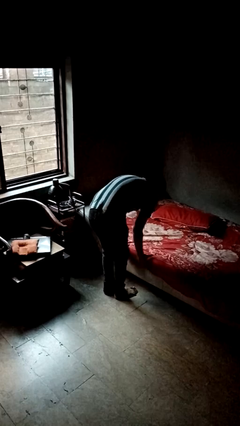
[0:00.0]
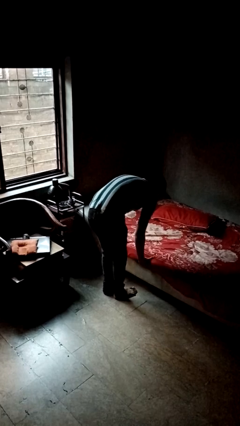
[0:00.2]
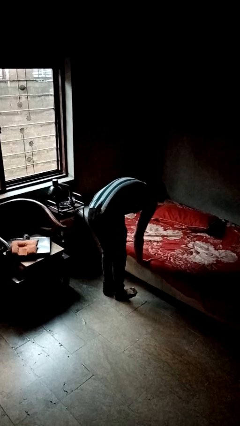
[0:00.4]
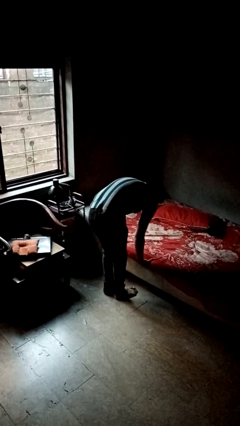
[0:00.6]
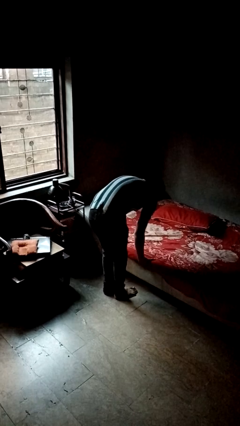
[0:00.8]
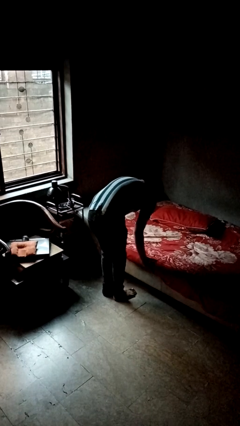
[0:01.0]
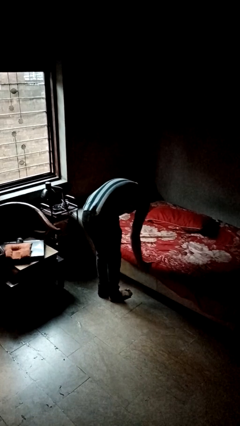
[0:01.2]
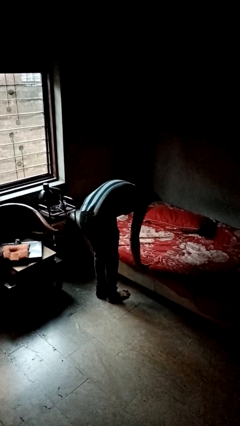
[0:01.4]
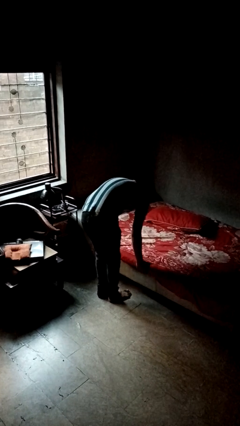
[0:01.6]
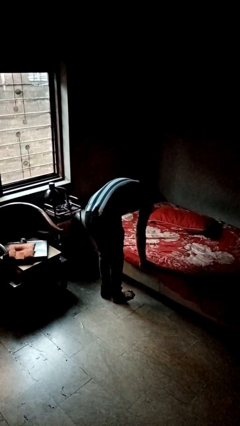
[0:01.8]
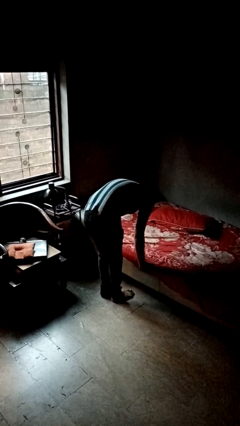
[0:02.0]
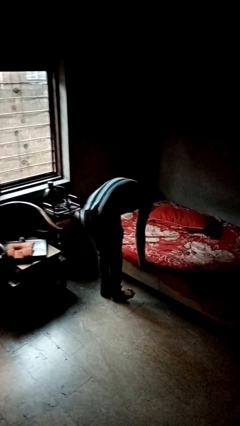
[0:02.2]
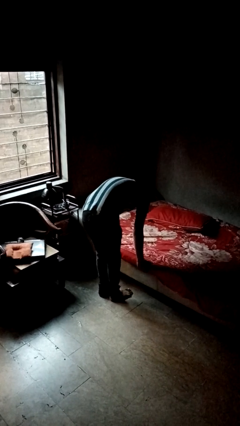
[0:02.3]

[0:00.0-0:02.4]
person makes bed

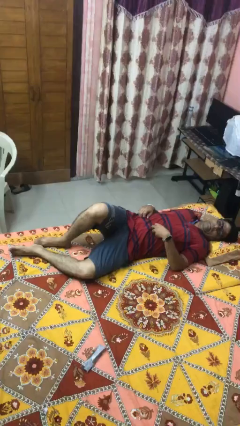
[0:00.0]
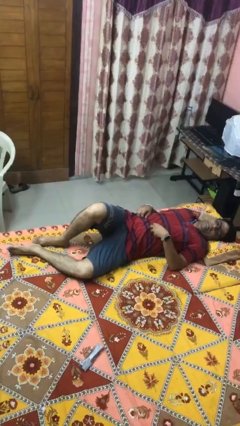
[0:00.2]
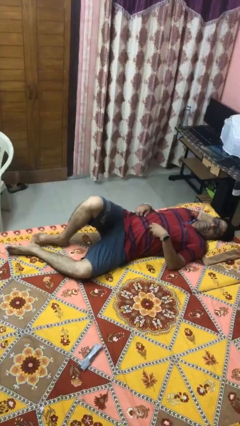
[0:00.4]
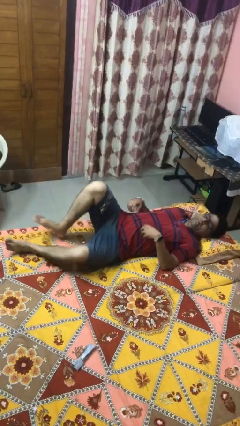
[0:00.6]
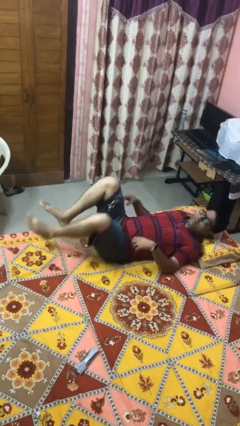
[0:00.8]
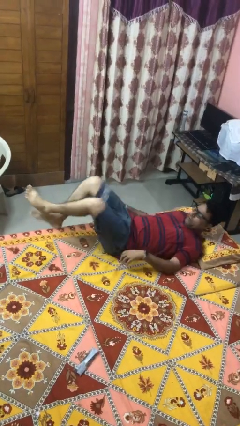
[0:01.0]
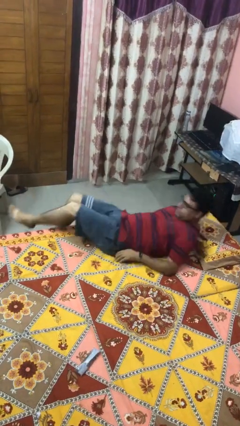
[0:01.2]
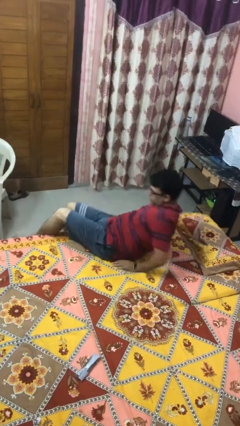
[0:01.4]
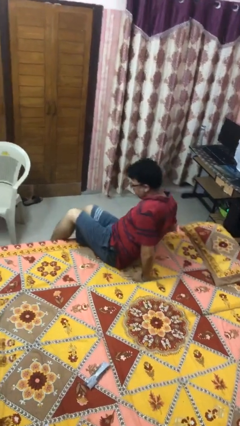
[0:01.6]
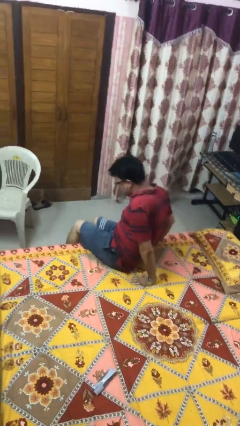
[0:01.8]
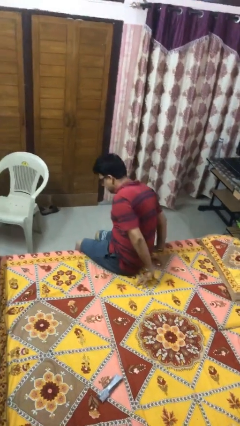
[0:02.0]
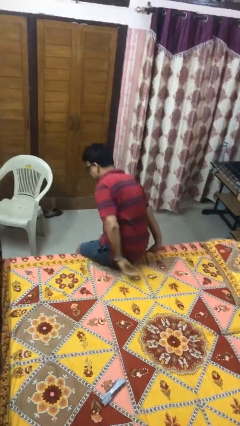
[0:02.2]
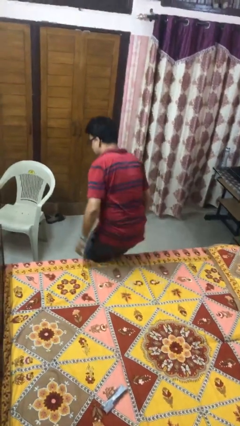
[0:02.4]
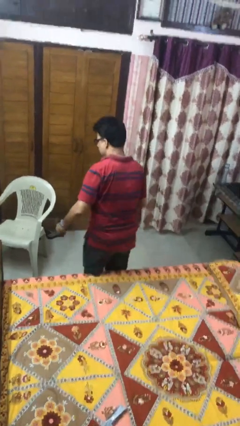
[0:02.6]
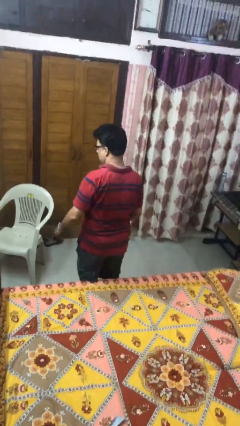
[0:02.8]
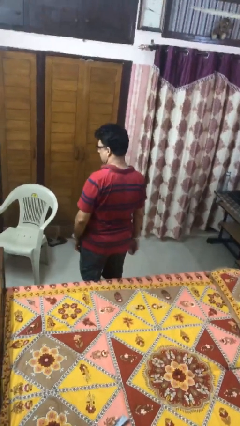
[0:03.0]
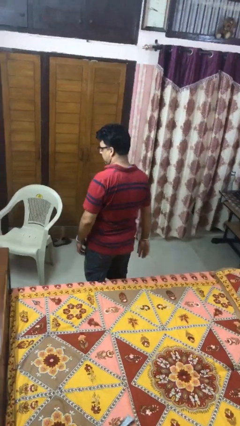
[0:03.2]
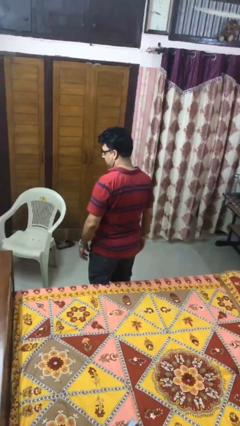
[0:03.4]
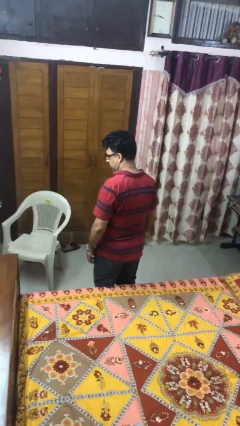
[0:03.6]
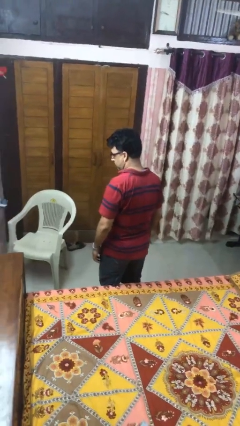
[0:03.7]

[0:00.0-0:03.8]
person stands up

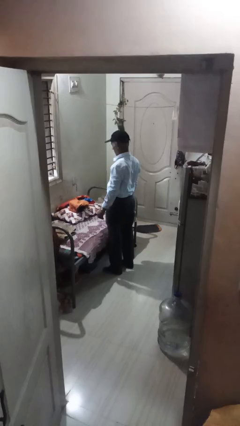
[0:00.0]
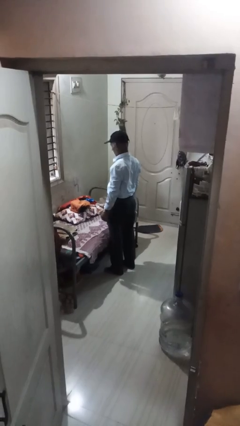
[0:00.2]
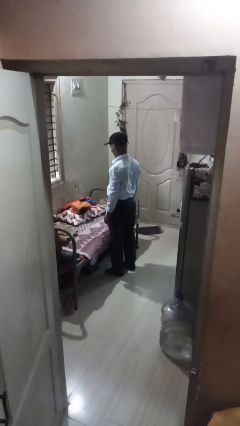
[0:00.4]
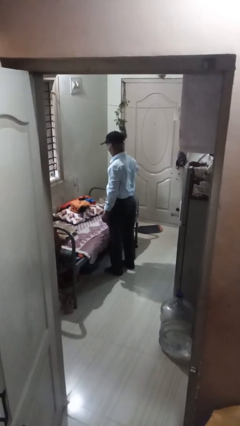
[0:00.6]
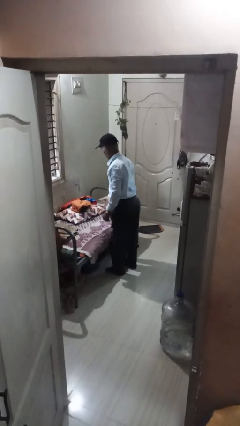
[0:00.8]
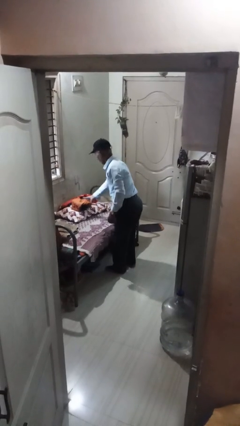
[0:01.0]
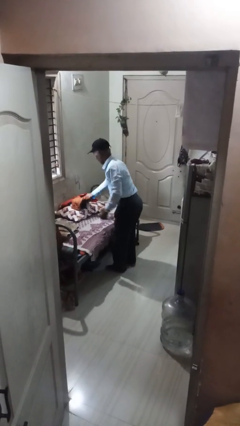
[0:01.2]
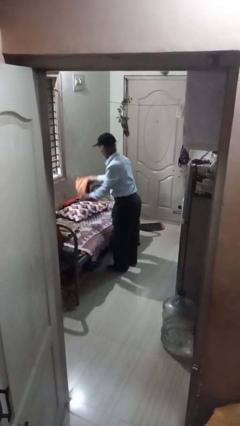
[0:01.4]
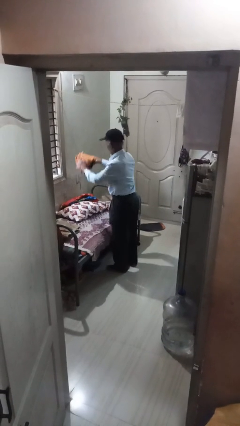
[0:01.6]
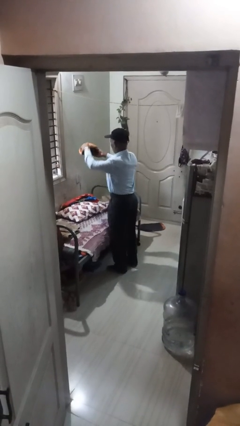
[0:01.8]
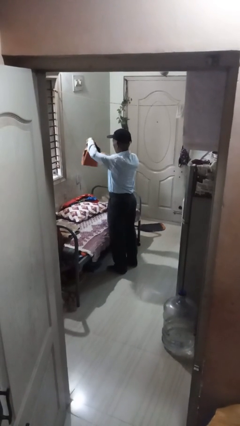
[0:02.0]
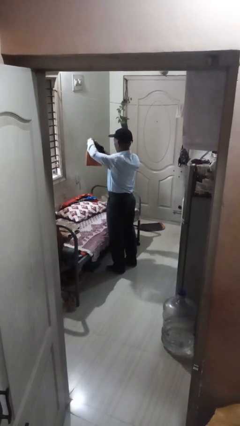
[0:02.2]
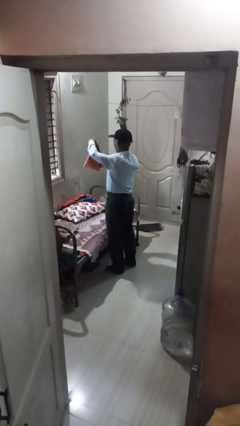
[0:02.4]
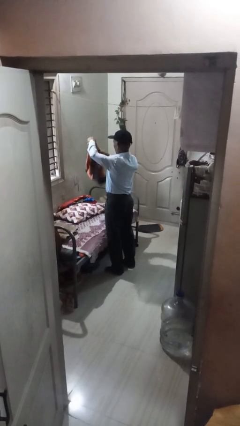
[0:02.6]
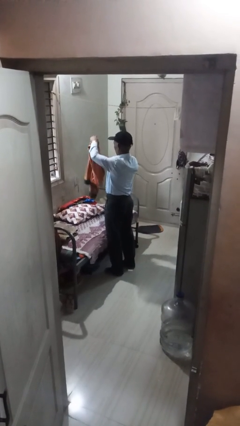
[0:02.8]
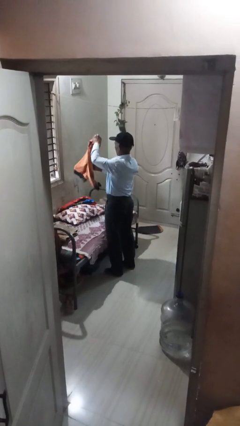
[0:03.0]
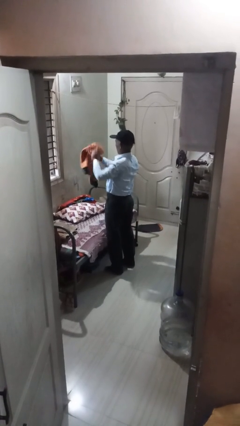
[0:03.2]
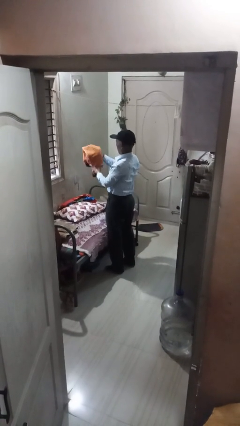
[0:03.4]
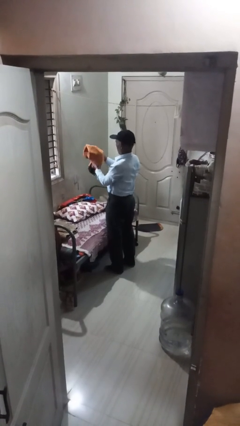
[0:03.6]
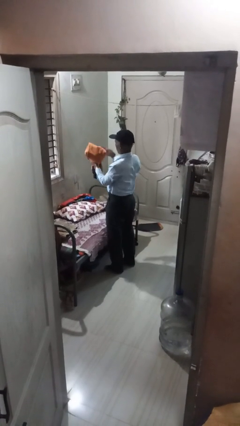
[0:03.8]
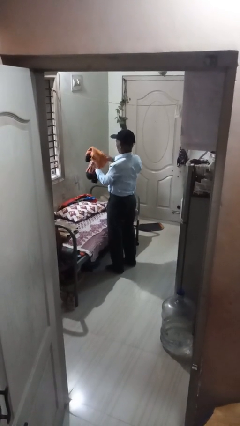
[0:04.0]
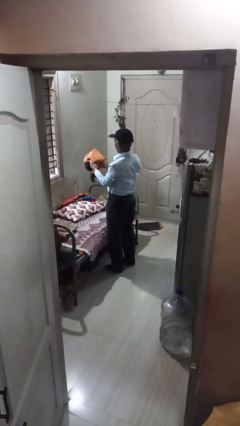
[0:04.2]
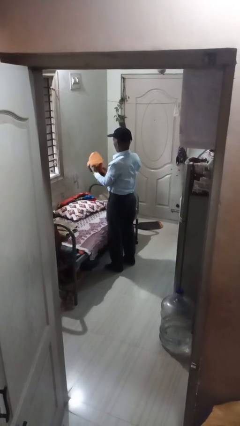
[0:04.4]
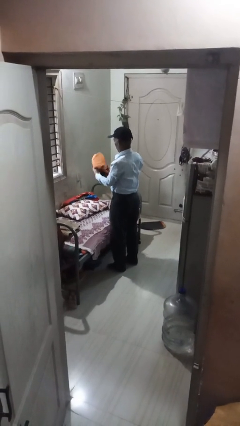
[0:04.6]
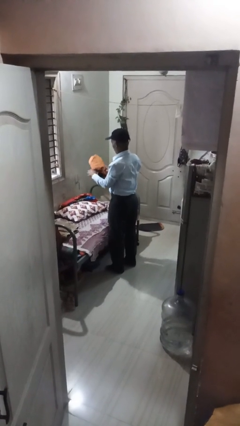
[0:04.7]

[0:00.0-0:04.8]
person folds shirt

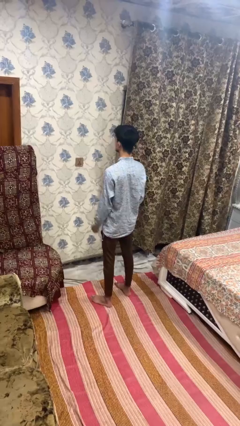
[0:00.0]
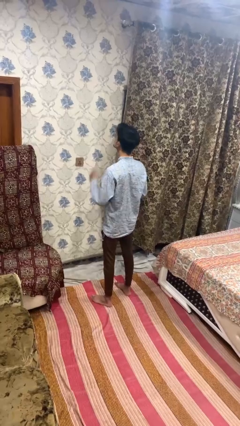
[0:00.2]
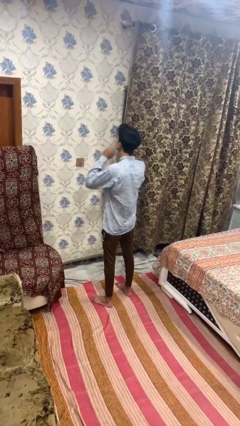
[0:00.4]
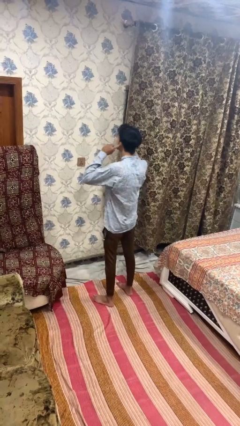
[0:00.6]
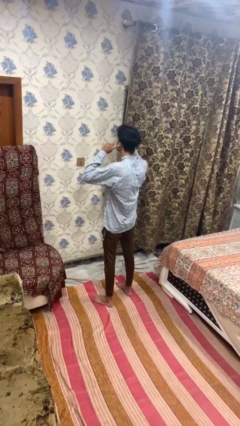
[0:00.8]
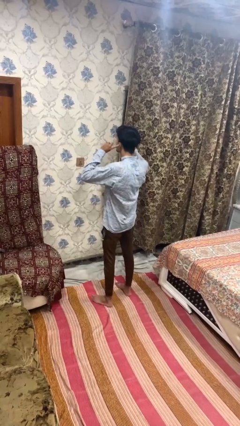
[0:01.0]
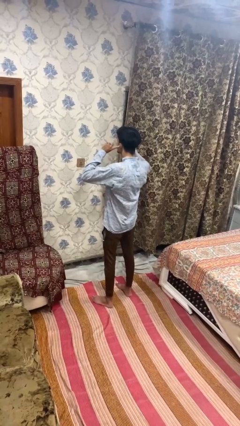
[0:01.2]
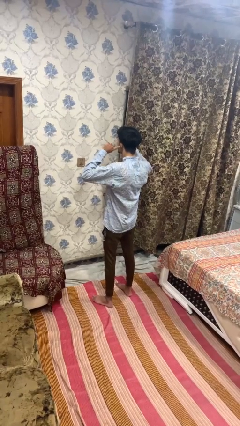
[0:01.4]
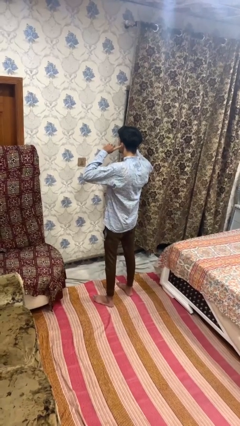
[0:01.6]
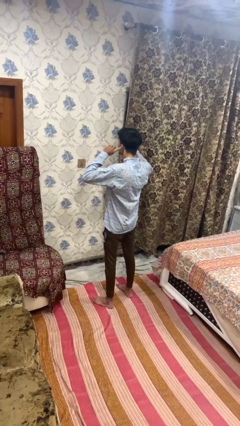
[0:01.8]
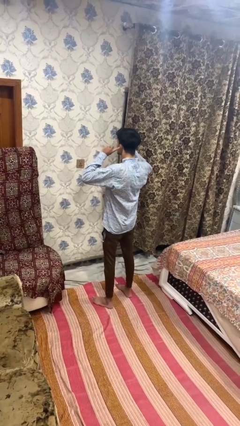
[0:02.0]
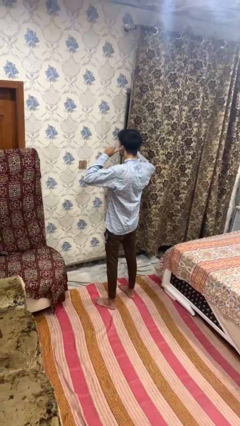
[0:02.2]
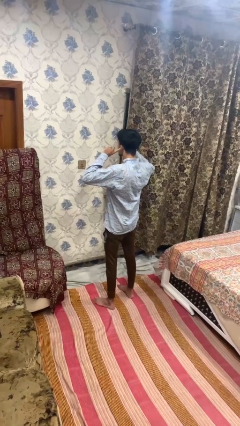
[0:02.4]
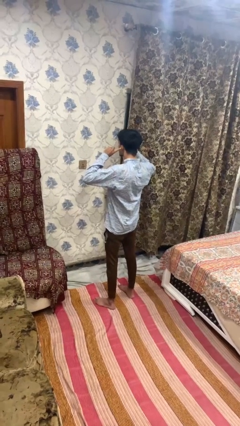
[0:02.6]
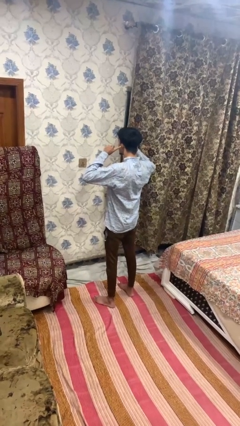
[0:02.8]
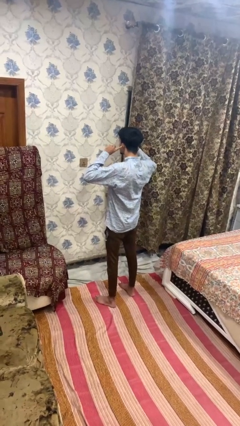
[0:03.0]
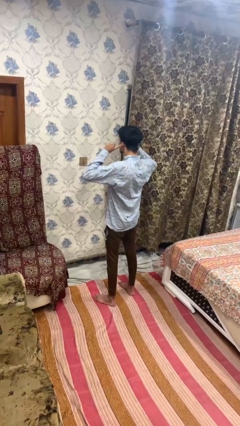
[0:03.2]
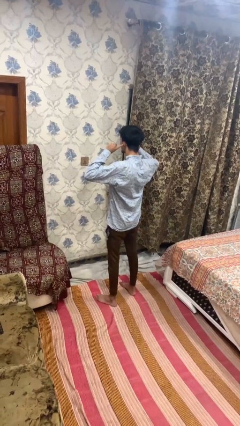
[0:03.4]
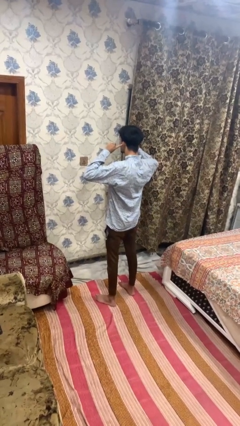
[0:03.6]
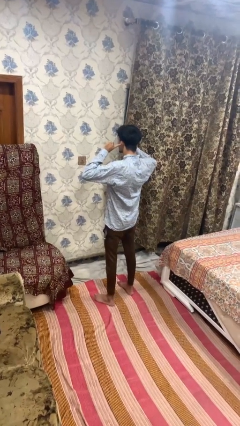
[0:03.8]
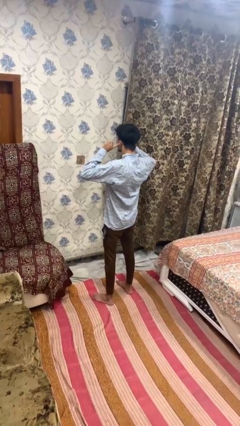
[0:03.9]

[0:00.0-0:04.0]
person puts fingers in ear

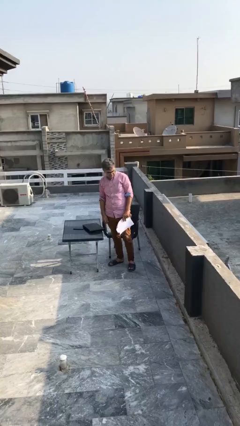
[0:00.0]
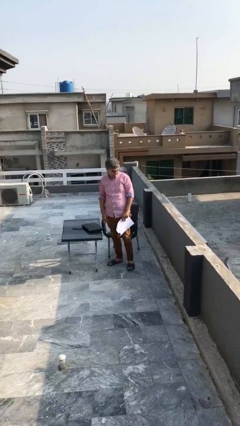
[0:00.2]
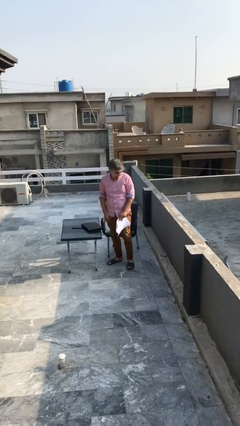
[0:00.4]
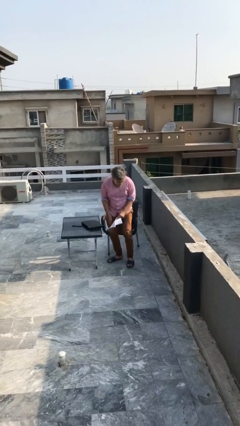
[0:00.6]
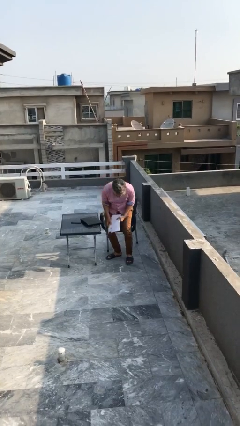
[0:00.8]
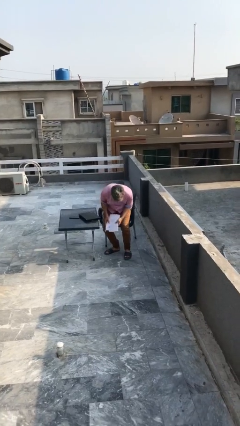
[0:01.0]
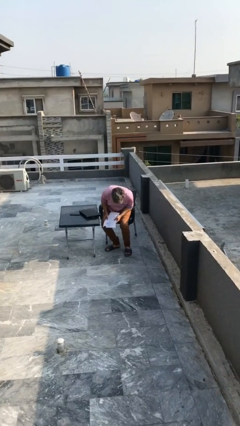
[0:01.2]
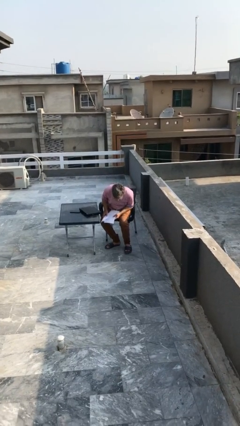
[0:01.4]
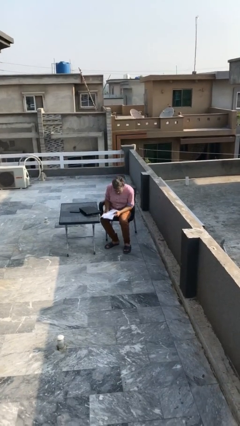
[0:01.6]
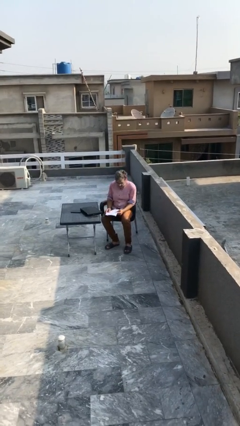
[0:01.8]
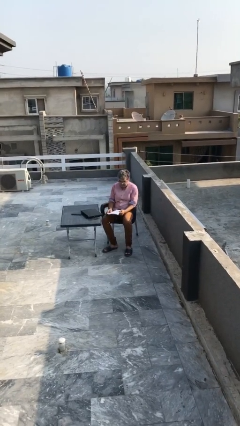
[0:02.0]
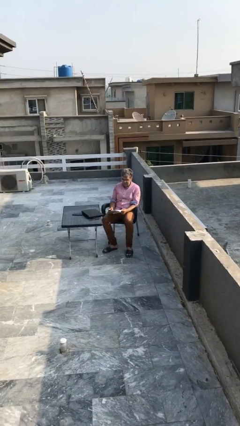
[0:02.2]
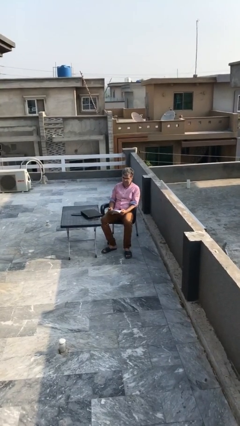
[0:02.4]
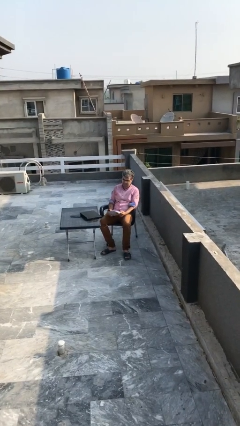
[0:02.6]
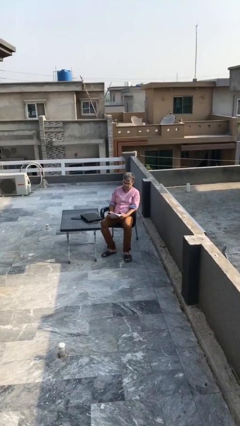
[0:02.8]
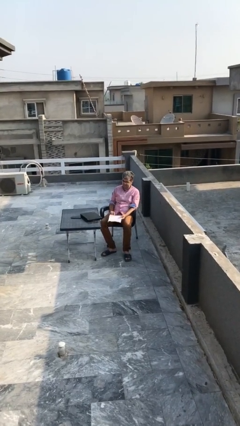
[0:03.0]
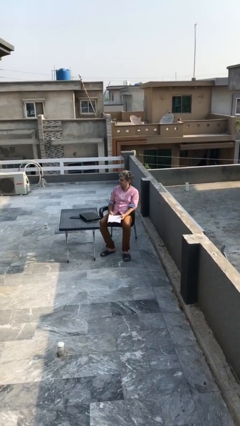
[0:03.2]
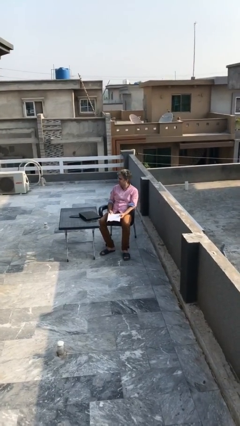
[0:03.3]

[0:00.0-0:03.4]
person sits down
